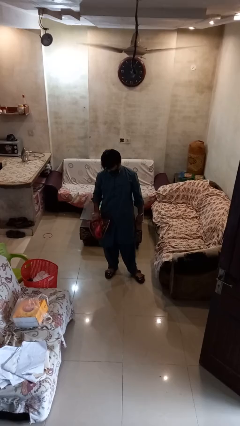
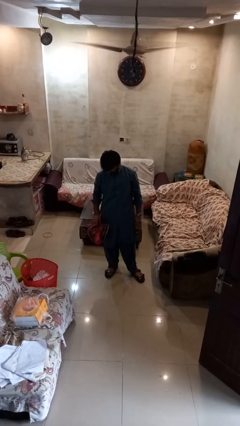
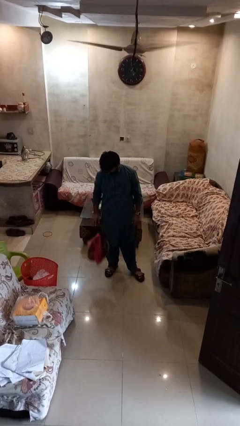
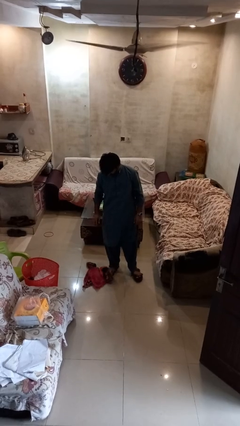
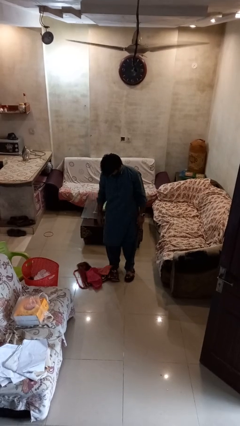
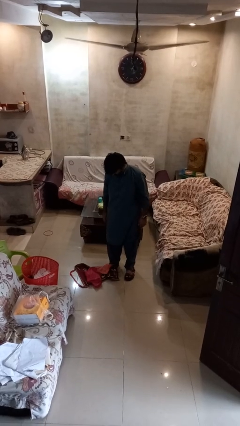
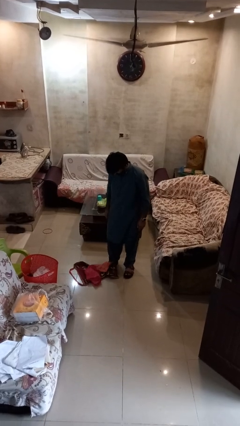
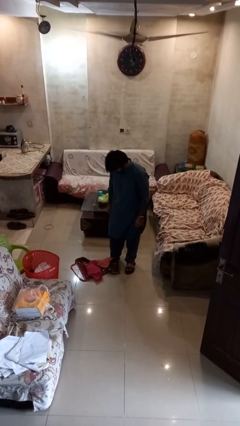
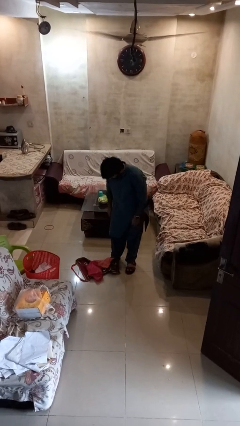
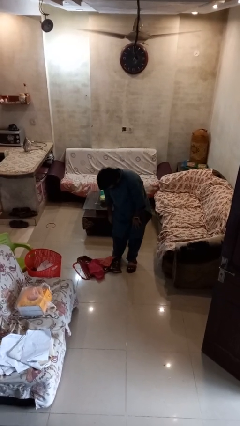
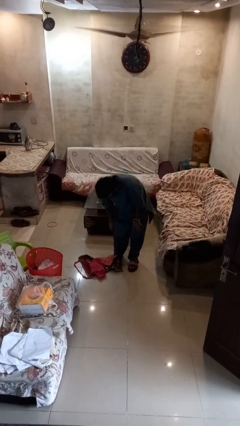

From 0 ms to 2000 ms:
person drops object

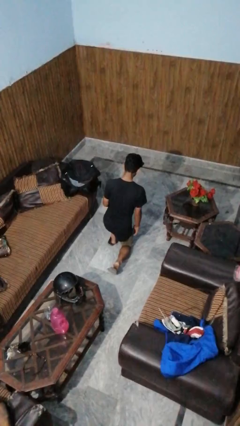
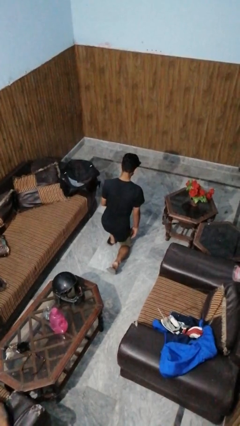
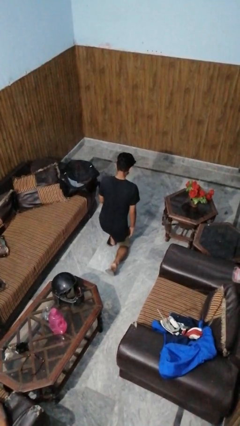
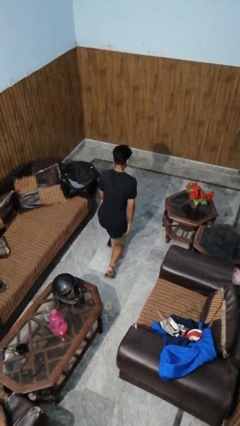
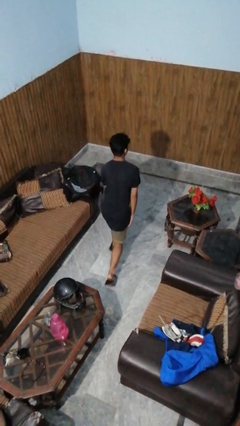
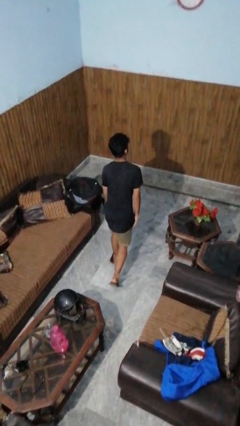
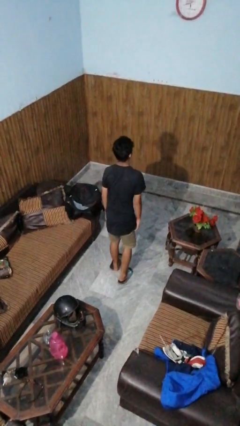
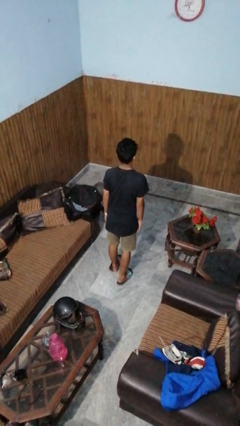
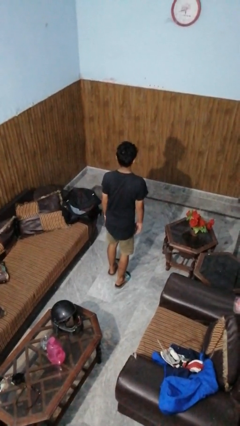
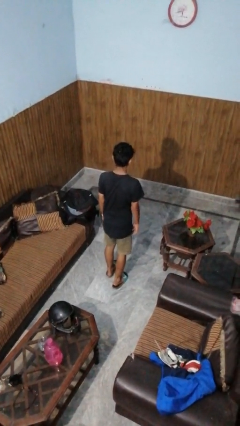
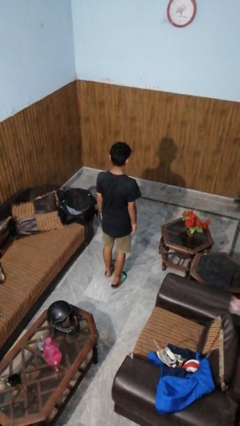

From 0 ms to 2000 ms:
person stands up from floor

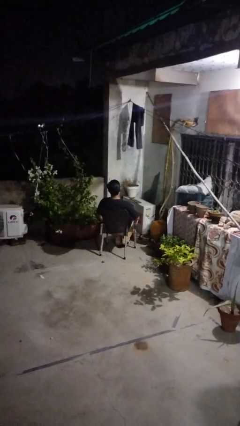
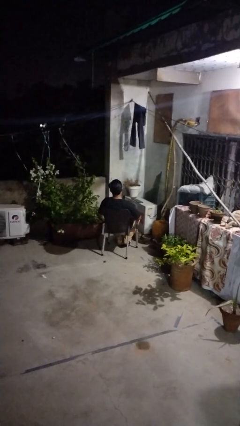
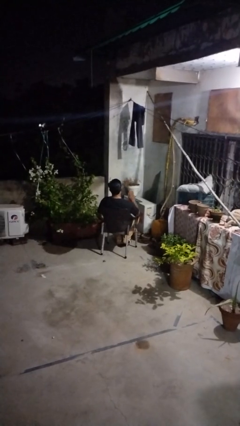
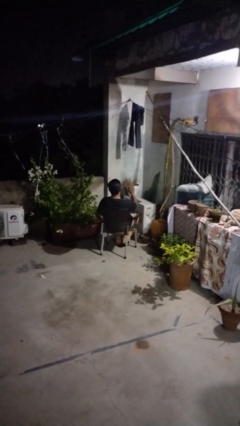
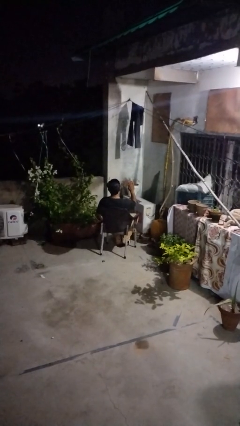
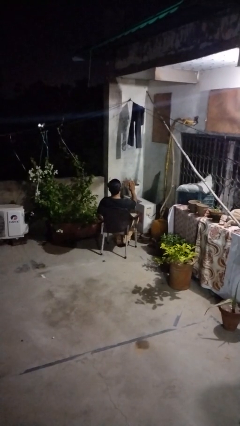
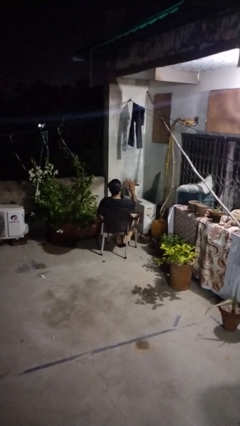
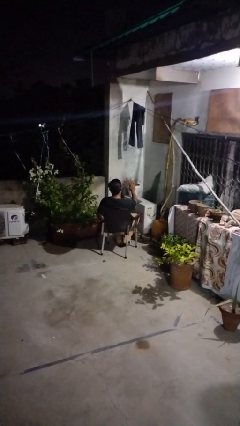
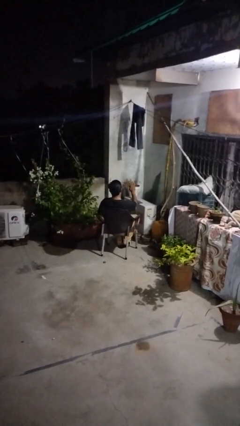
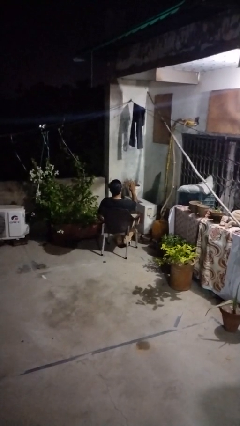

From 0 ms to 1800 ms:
person gestures stop

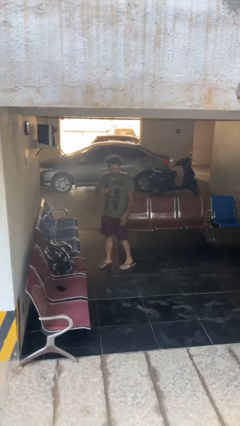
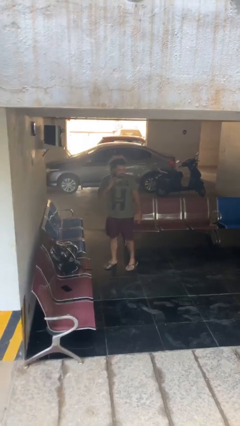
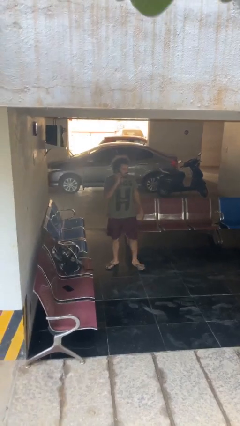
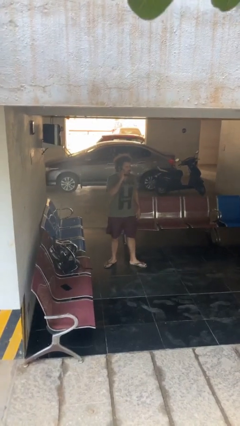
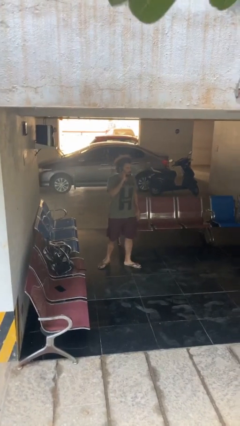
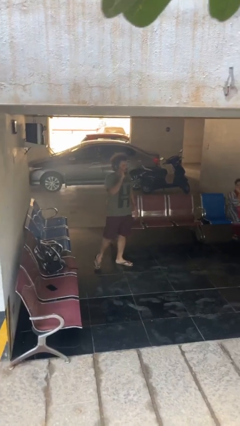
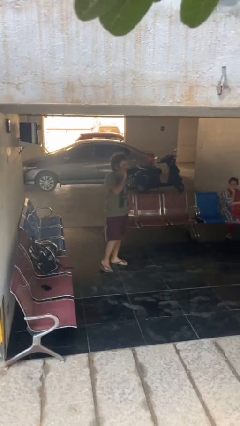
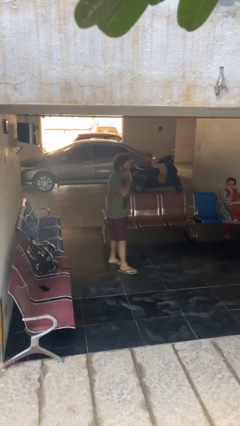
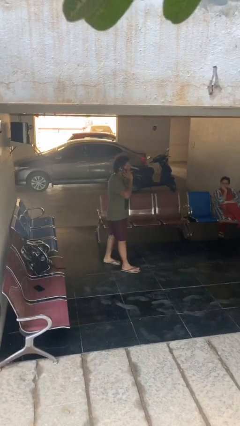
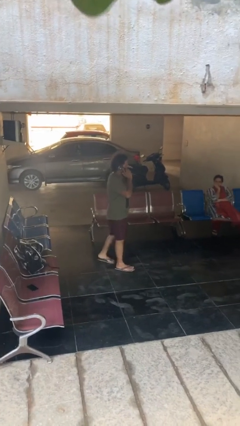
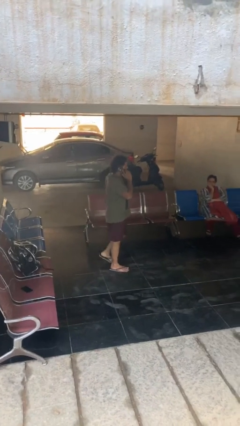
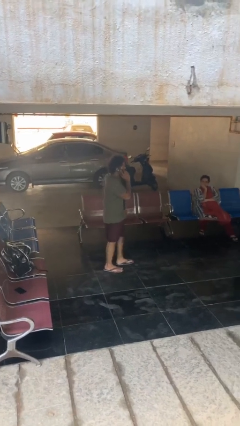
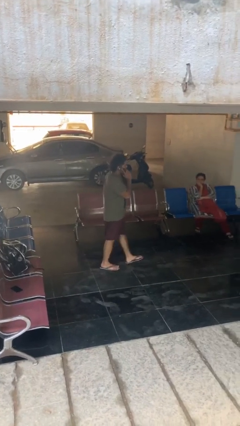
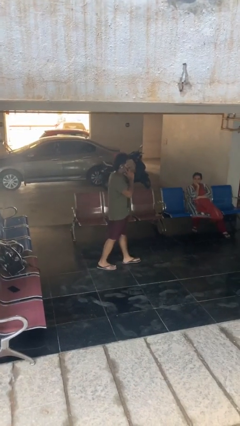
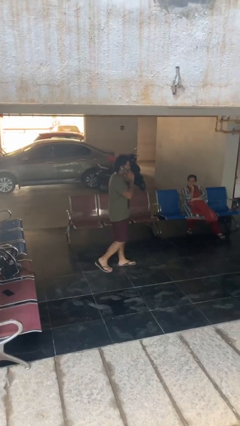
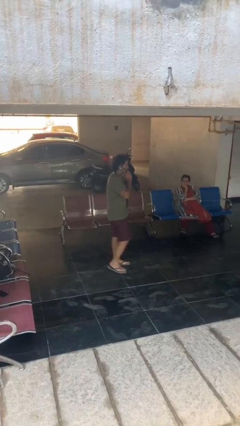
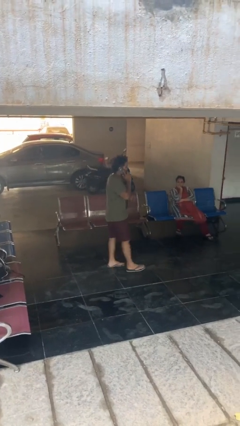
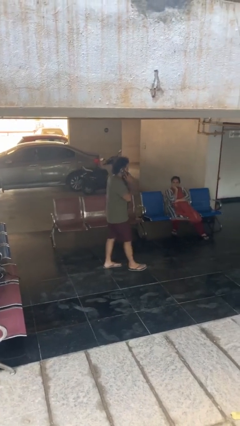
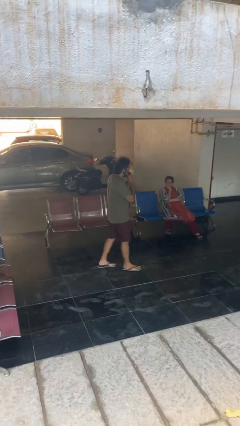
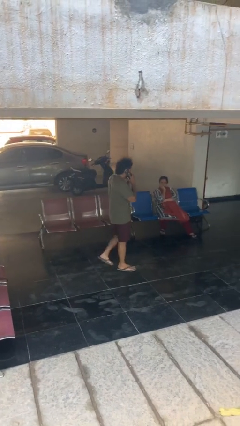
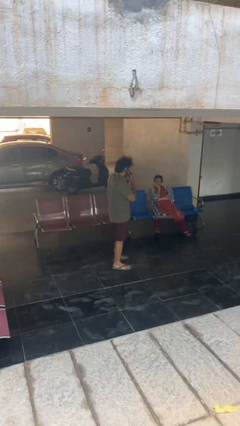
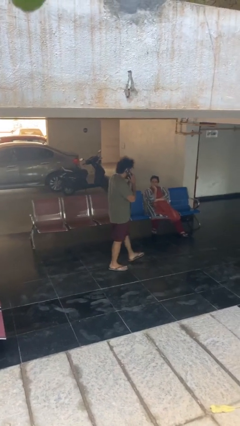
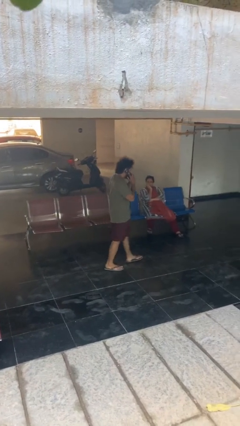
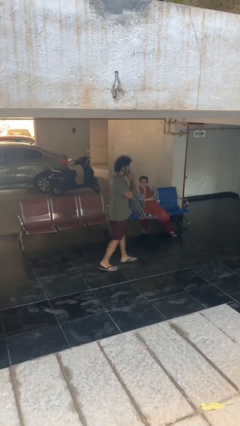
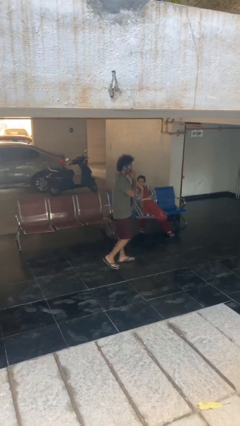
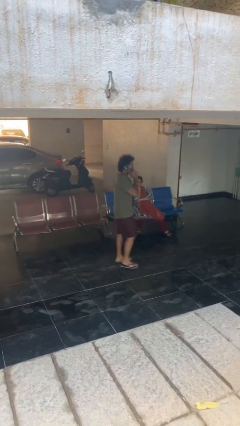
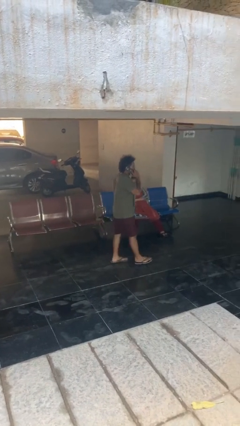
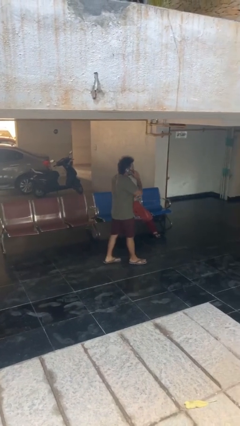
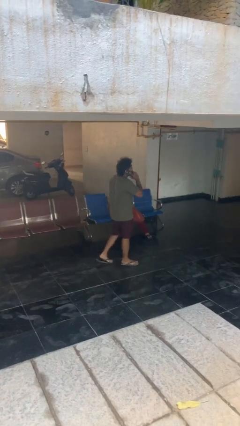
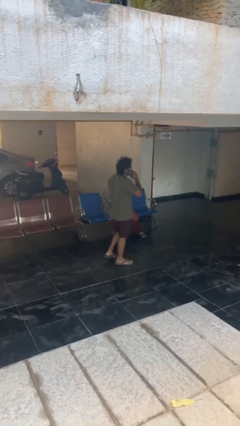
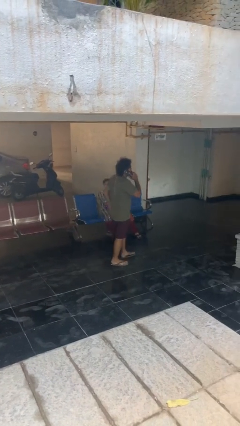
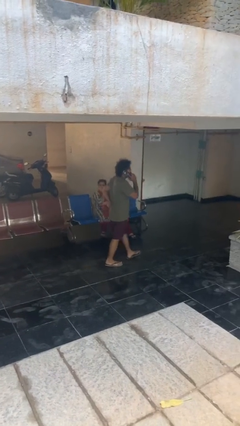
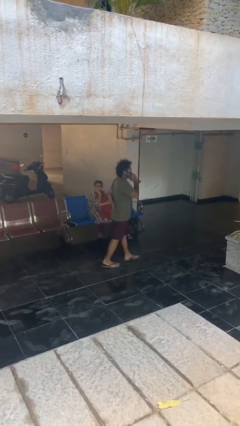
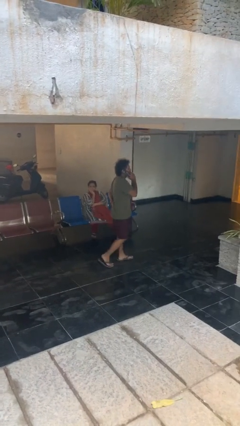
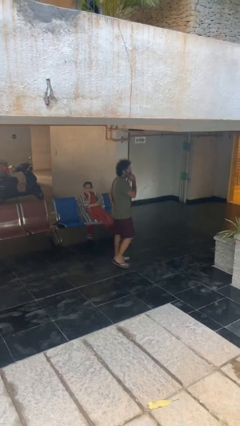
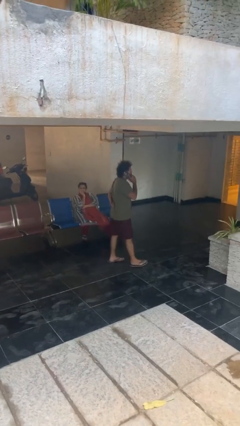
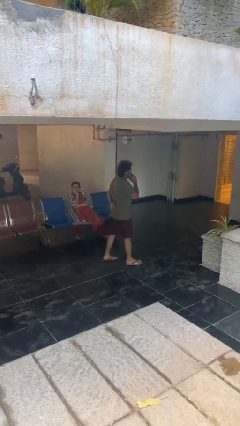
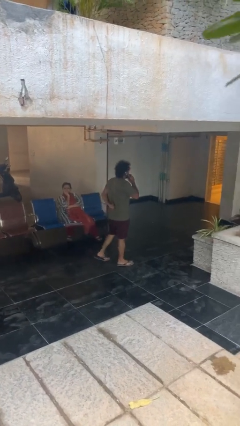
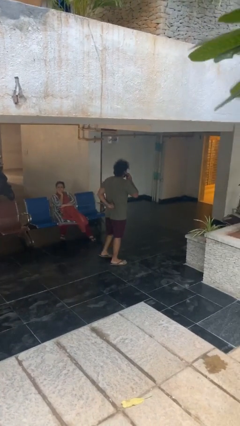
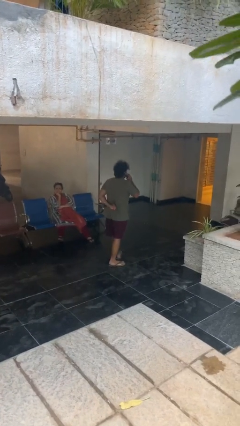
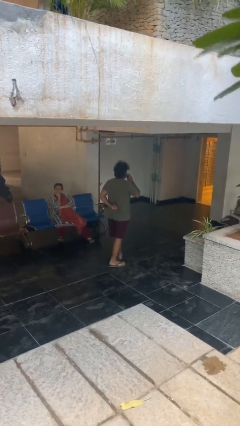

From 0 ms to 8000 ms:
person talks on phone

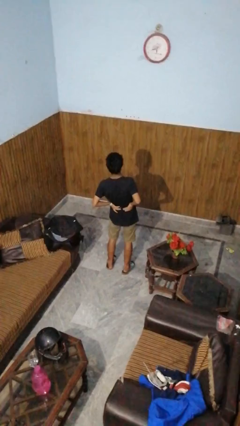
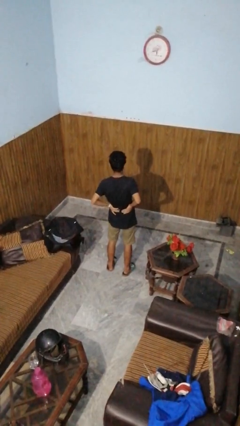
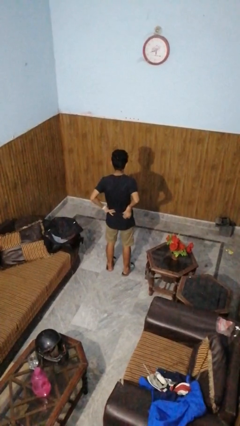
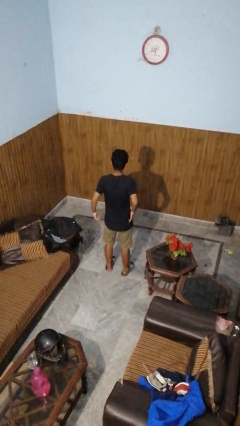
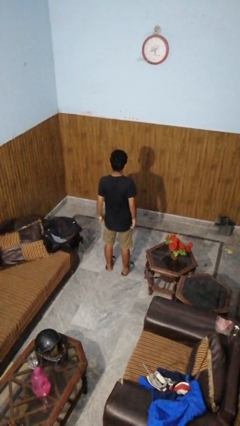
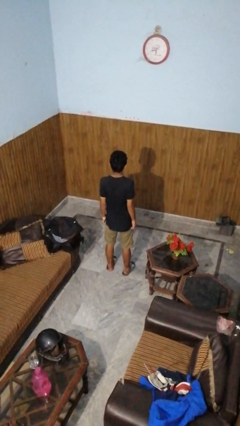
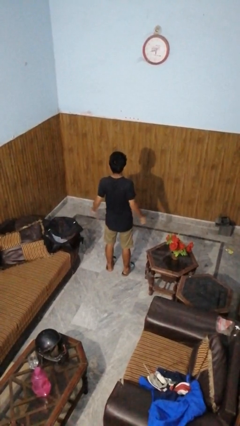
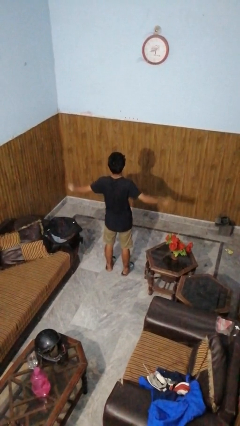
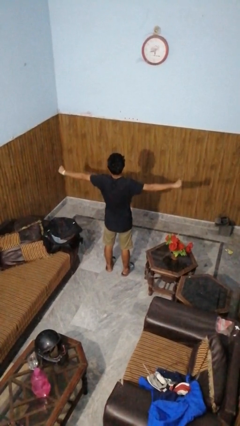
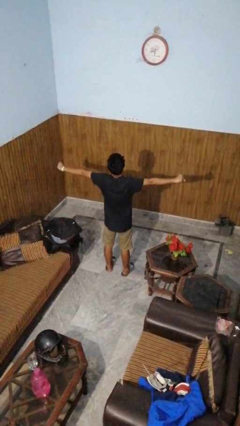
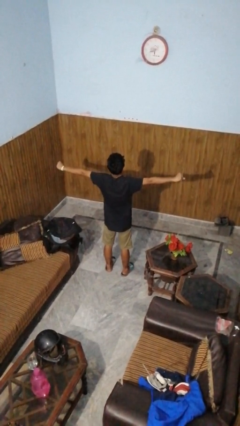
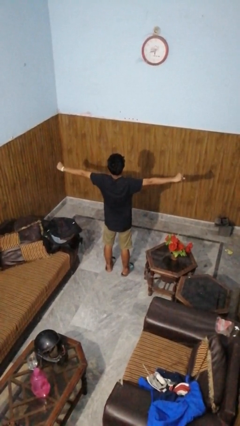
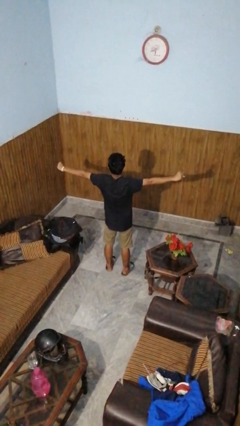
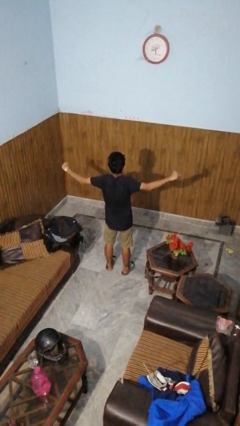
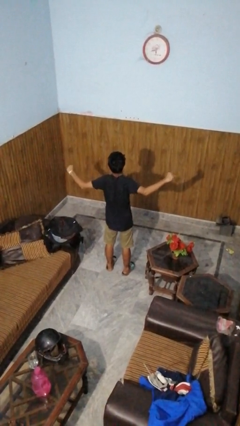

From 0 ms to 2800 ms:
person stretches arms to side

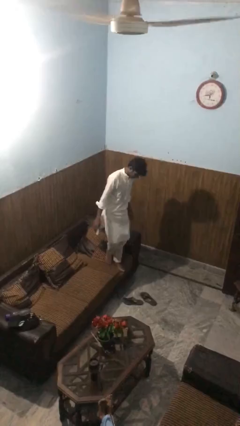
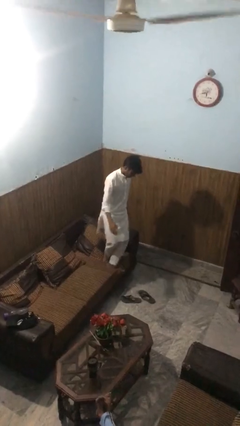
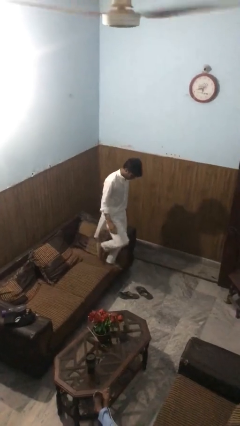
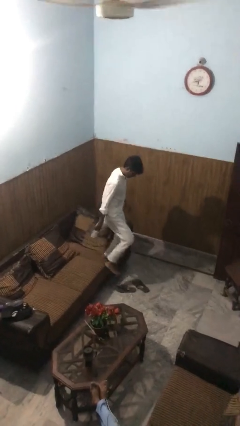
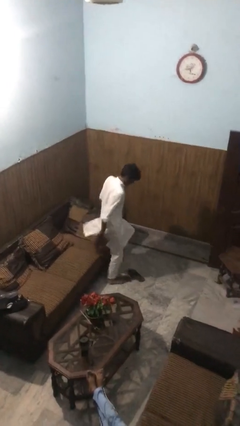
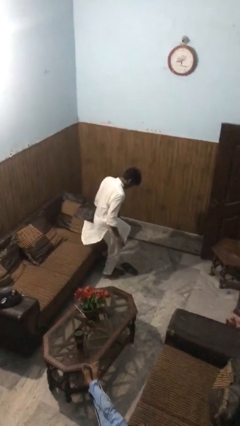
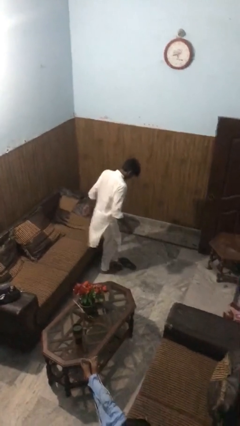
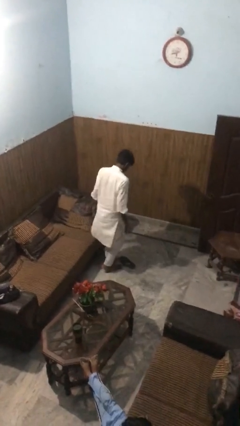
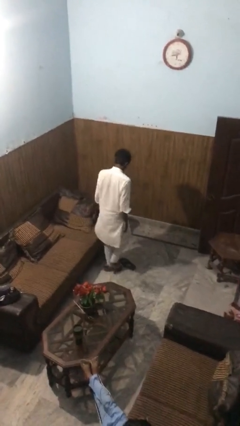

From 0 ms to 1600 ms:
person climbs off couch
